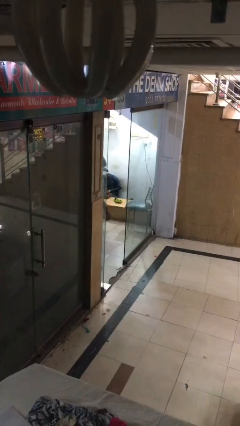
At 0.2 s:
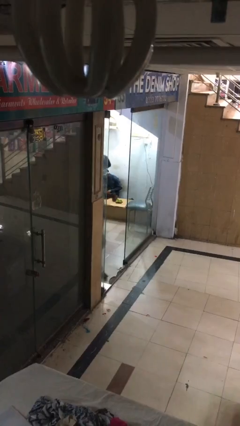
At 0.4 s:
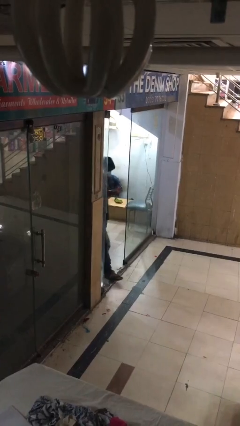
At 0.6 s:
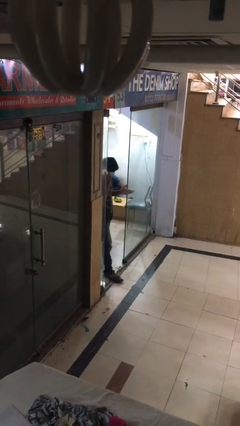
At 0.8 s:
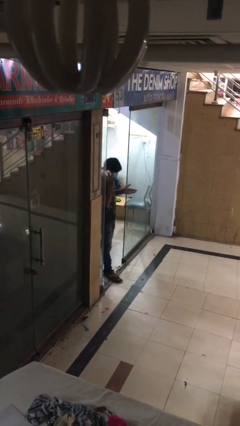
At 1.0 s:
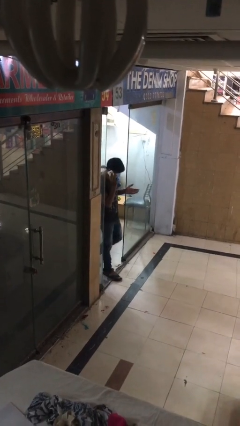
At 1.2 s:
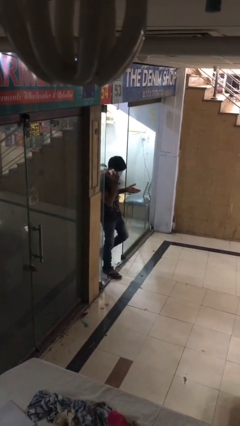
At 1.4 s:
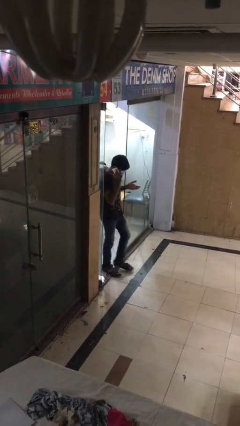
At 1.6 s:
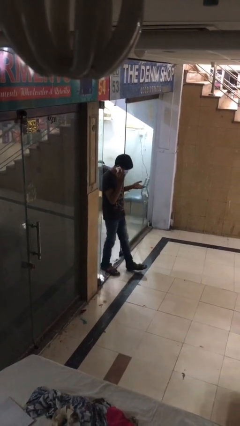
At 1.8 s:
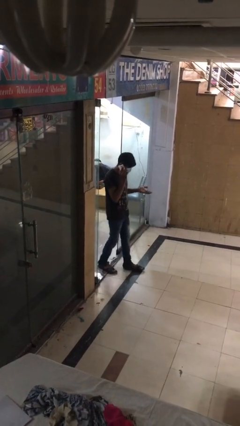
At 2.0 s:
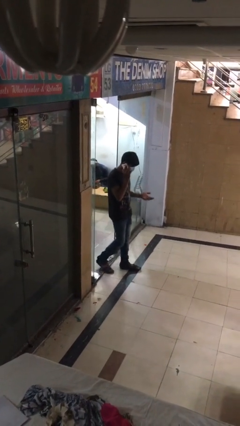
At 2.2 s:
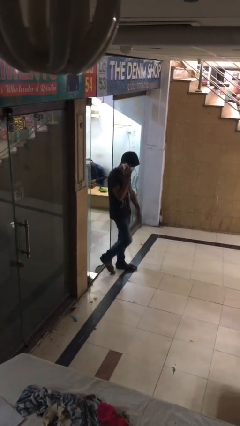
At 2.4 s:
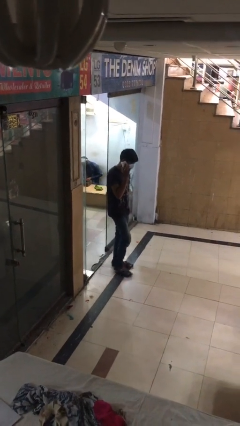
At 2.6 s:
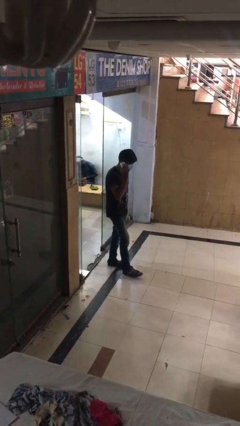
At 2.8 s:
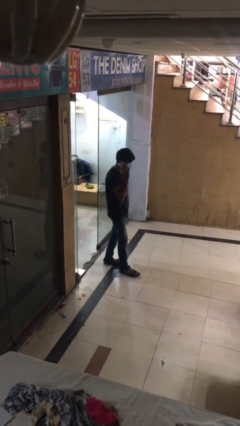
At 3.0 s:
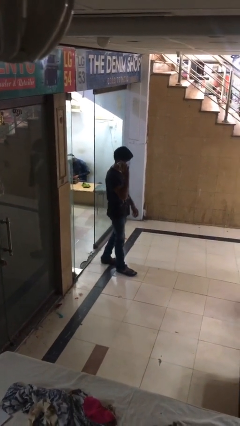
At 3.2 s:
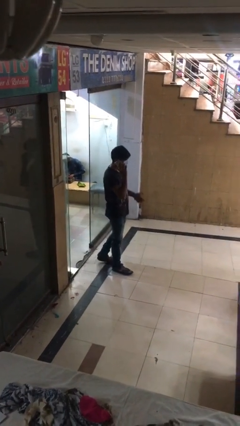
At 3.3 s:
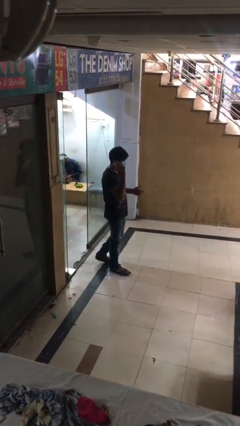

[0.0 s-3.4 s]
person enters scene through structure

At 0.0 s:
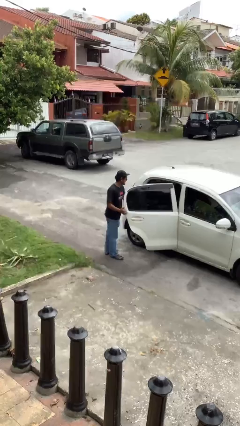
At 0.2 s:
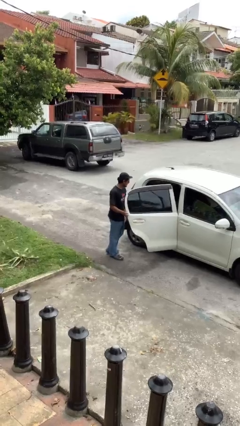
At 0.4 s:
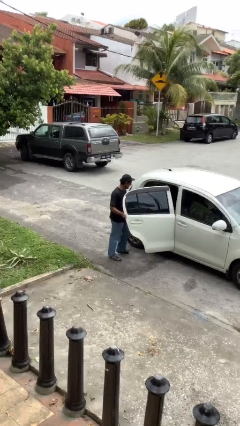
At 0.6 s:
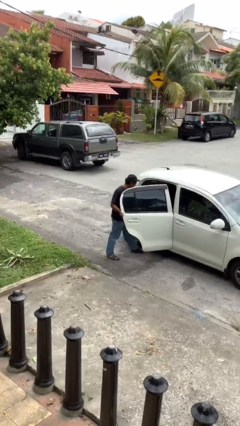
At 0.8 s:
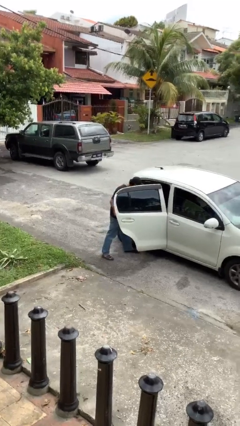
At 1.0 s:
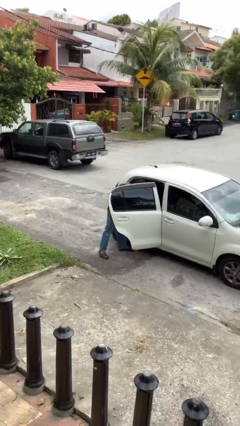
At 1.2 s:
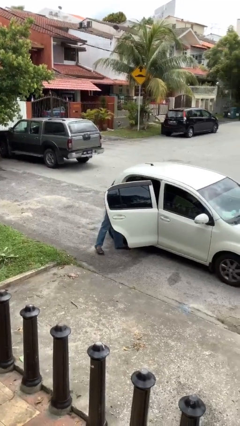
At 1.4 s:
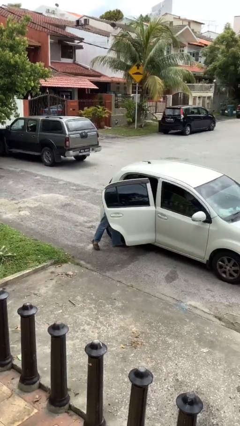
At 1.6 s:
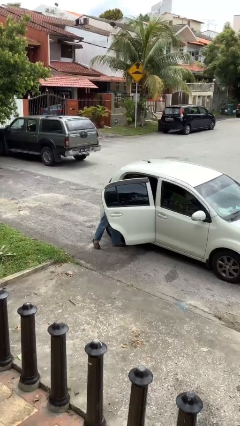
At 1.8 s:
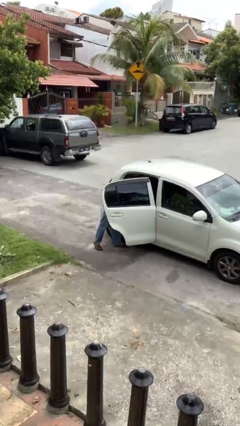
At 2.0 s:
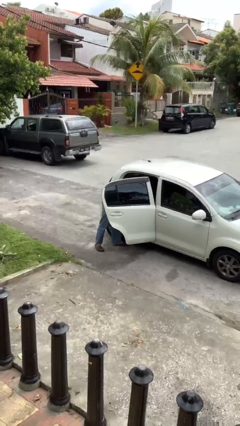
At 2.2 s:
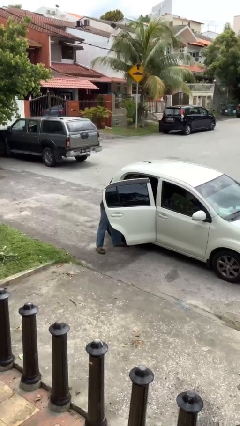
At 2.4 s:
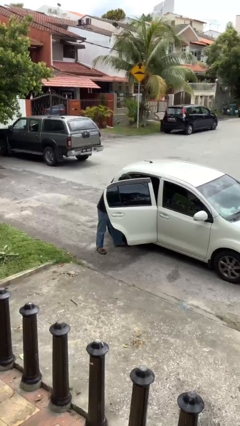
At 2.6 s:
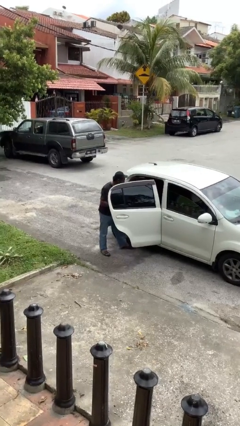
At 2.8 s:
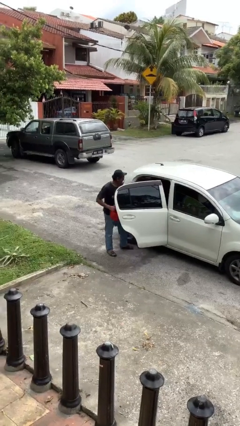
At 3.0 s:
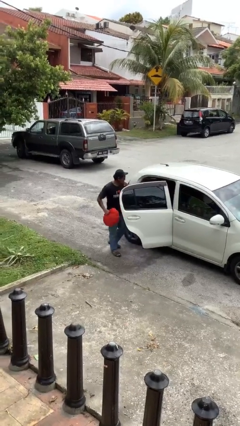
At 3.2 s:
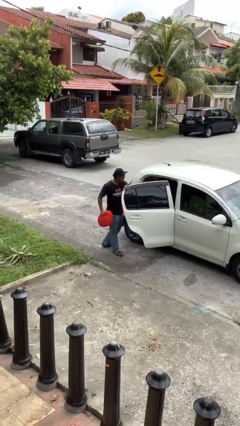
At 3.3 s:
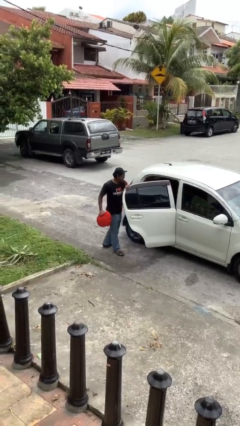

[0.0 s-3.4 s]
person unloads car

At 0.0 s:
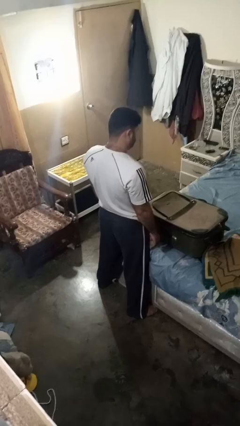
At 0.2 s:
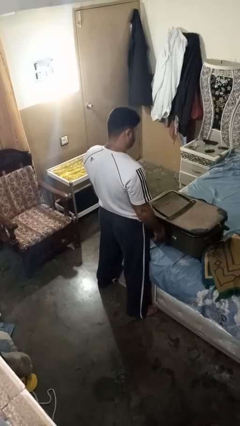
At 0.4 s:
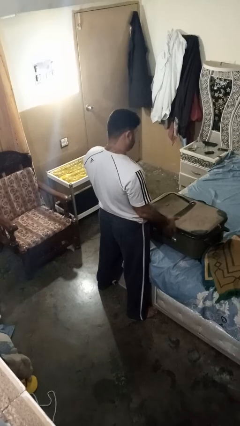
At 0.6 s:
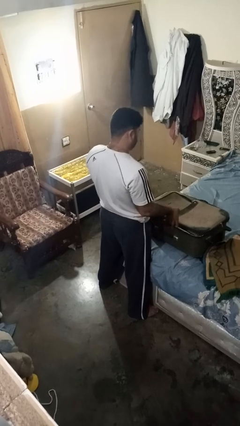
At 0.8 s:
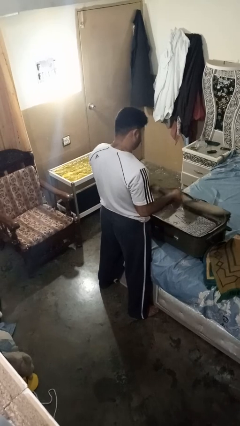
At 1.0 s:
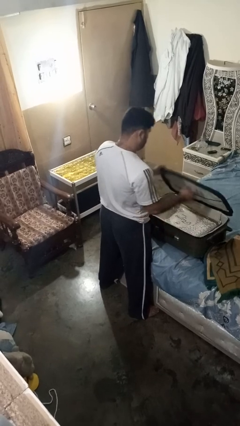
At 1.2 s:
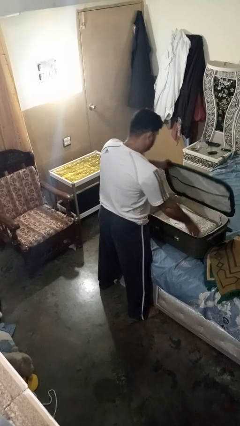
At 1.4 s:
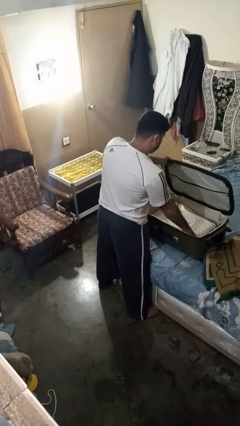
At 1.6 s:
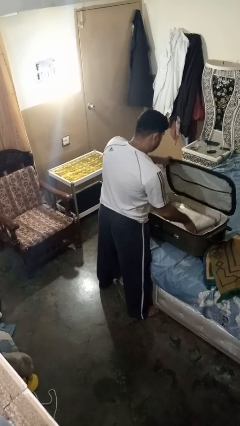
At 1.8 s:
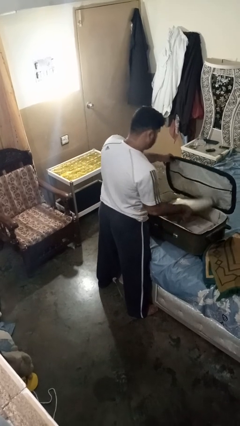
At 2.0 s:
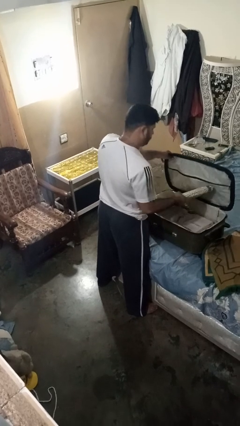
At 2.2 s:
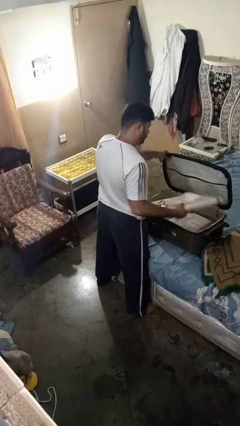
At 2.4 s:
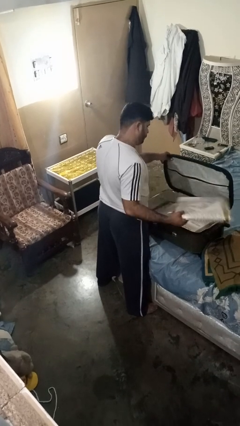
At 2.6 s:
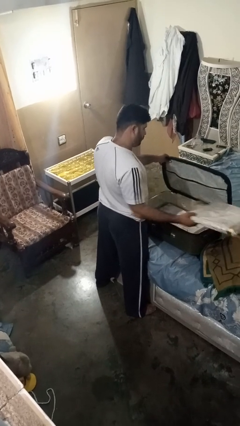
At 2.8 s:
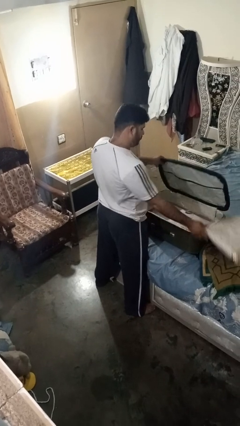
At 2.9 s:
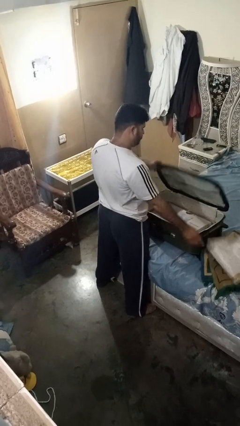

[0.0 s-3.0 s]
person unloads clothes from suitcase

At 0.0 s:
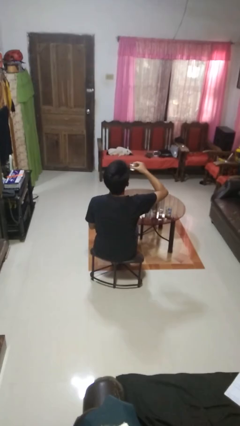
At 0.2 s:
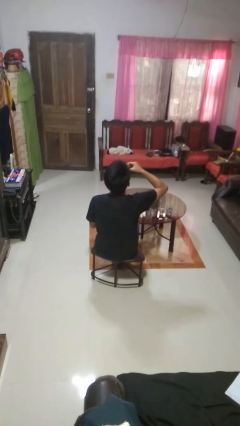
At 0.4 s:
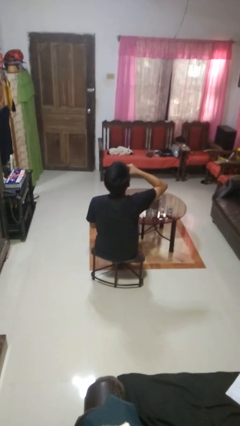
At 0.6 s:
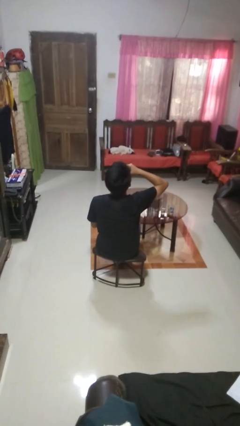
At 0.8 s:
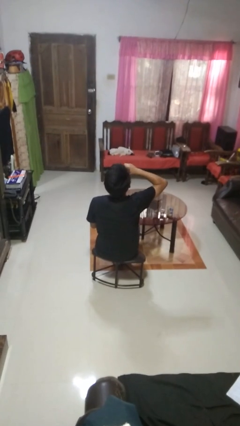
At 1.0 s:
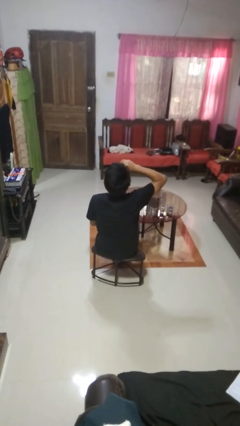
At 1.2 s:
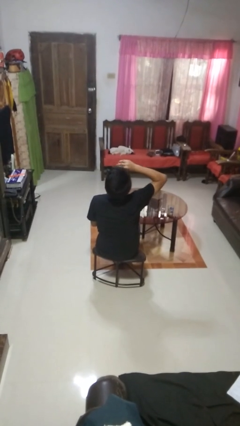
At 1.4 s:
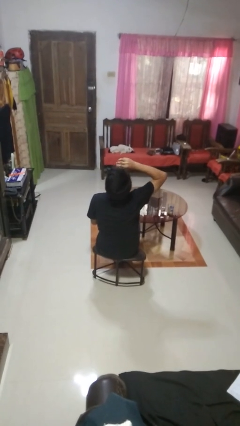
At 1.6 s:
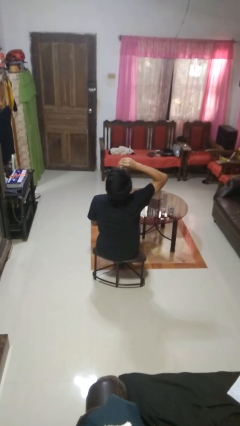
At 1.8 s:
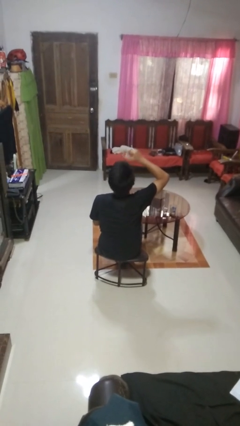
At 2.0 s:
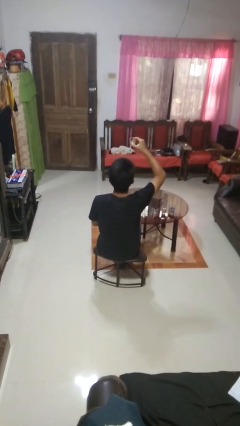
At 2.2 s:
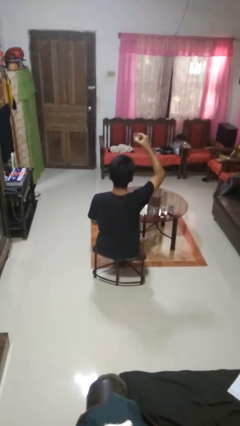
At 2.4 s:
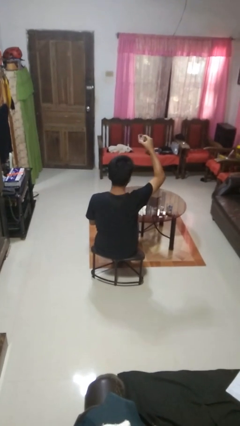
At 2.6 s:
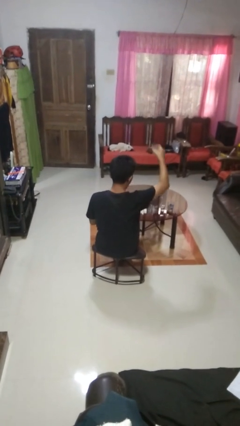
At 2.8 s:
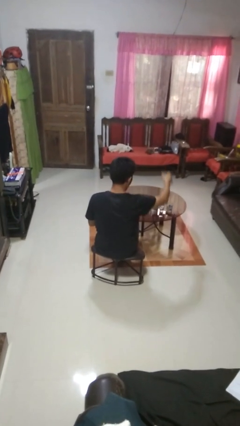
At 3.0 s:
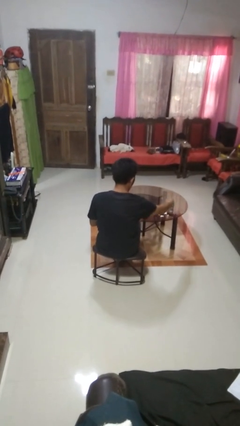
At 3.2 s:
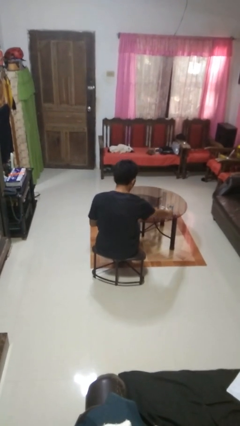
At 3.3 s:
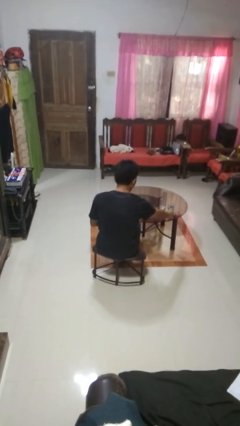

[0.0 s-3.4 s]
person drinks from shotglass

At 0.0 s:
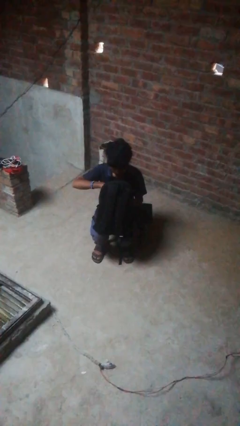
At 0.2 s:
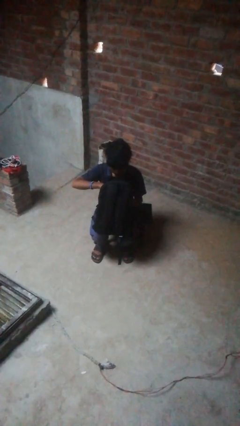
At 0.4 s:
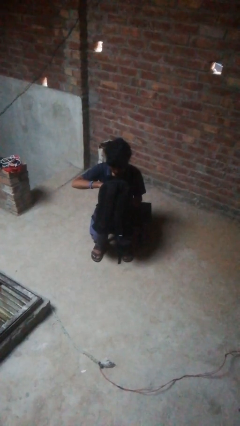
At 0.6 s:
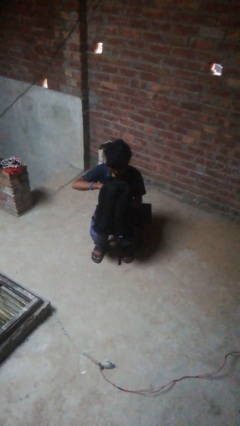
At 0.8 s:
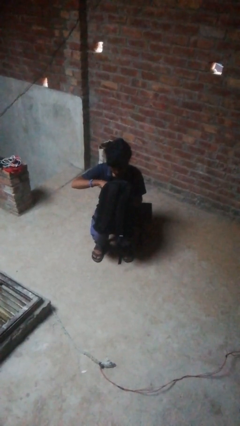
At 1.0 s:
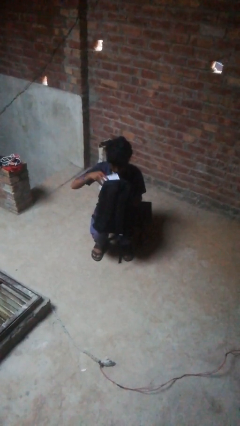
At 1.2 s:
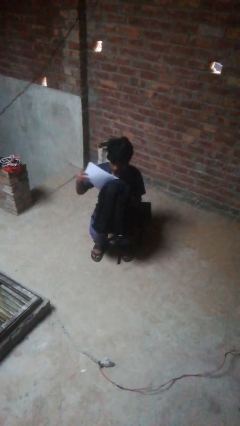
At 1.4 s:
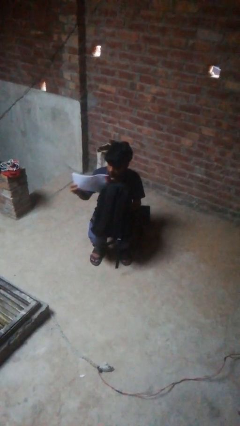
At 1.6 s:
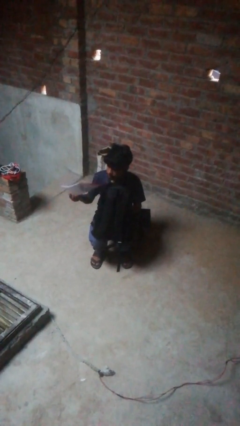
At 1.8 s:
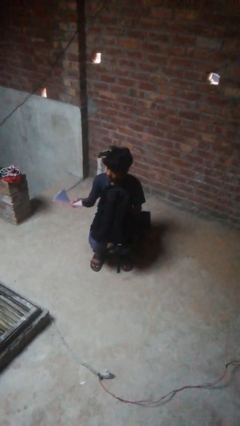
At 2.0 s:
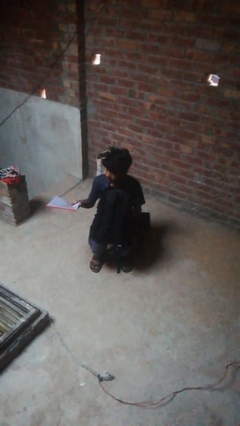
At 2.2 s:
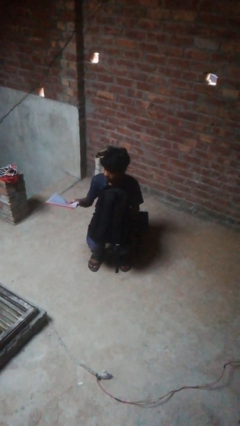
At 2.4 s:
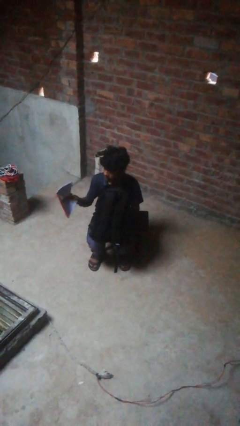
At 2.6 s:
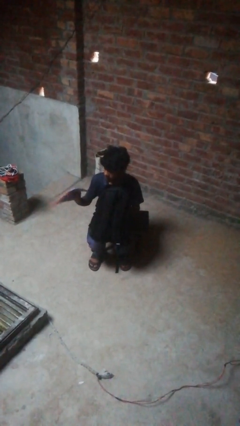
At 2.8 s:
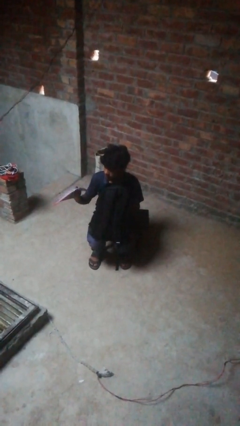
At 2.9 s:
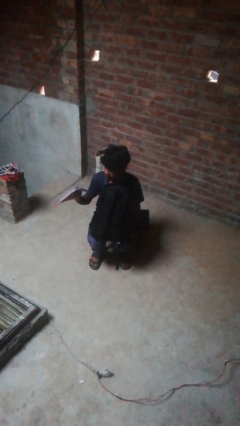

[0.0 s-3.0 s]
person takes object from backpack

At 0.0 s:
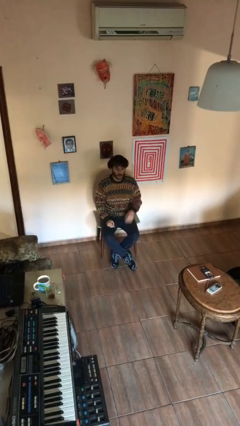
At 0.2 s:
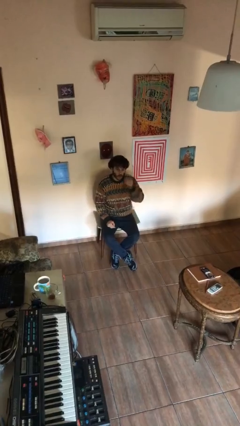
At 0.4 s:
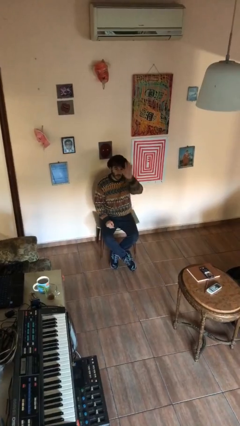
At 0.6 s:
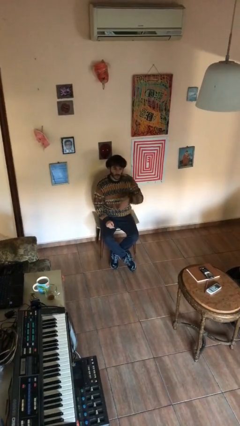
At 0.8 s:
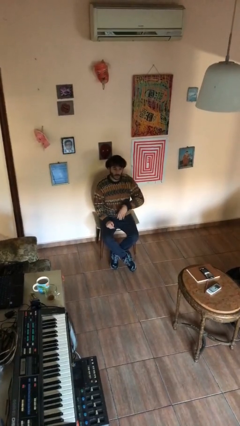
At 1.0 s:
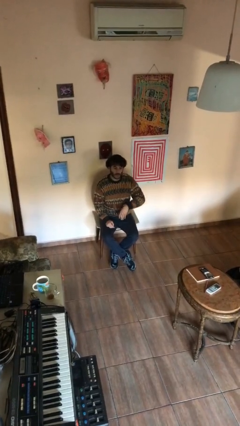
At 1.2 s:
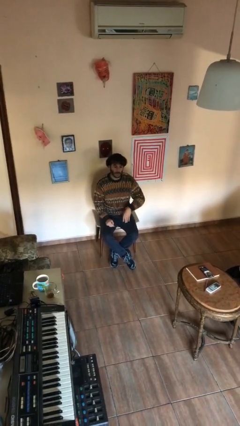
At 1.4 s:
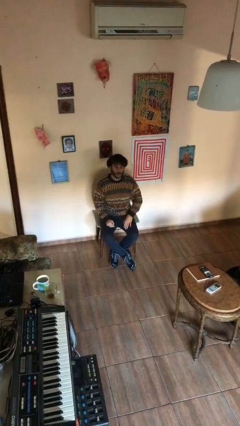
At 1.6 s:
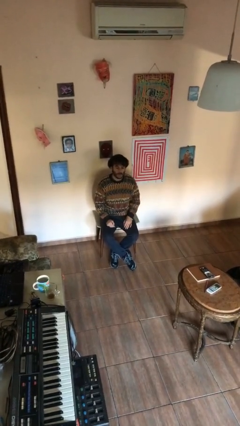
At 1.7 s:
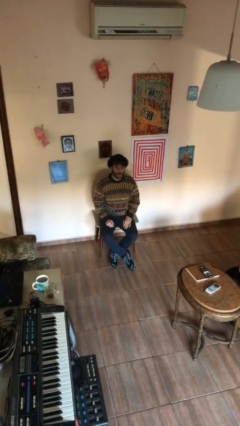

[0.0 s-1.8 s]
person gestures swipe down
